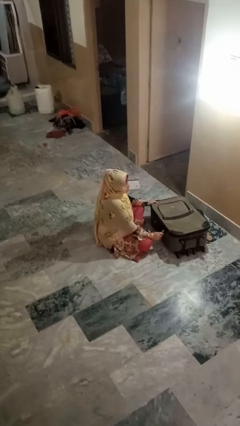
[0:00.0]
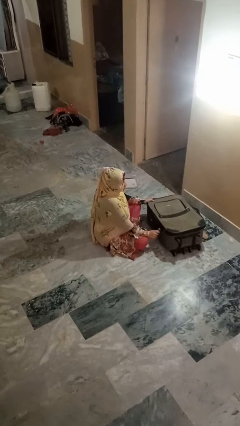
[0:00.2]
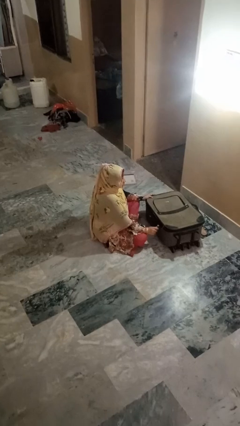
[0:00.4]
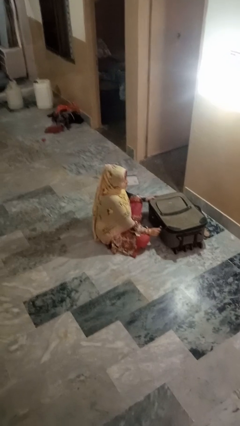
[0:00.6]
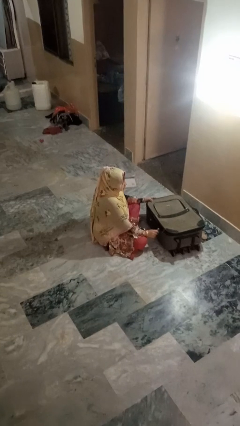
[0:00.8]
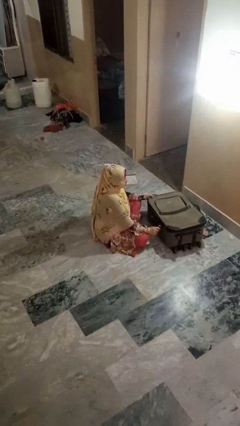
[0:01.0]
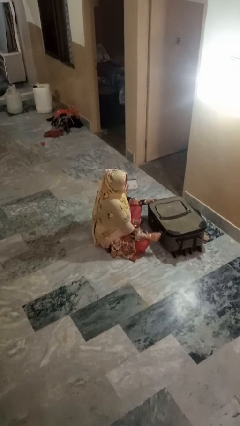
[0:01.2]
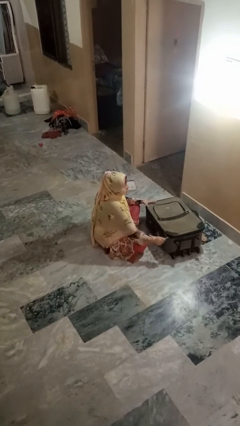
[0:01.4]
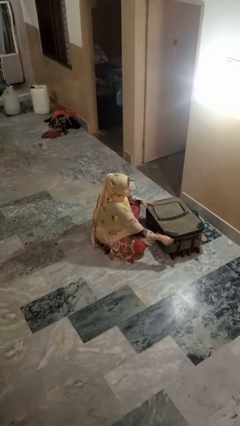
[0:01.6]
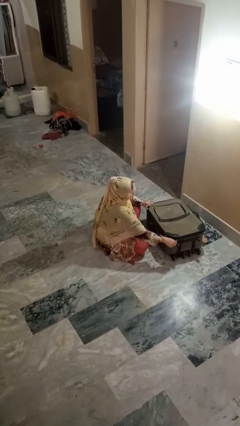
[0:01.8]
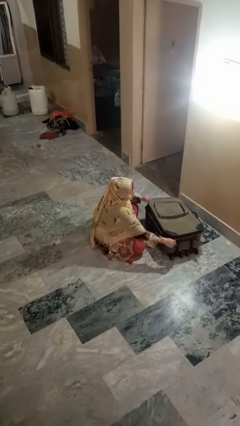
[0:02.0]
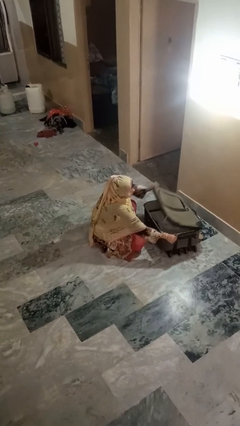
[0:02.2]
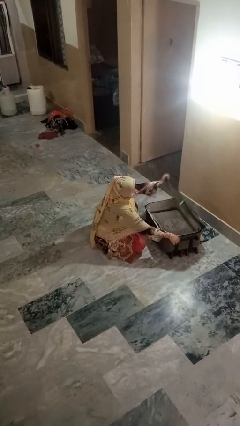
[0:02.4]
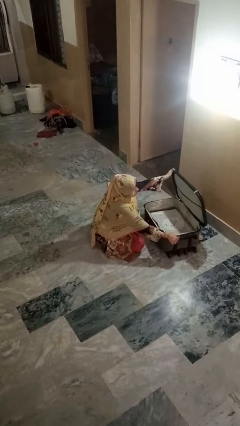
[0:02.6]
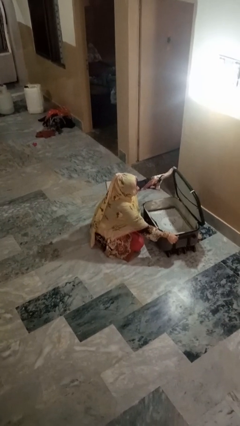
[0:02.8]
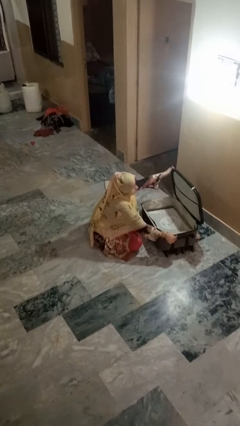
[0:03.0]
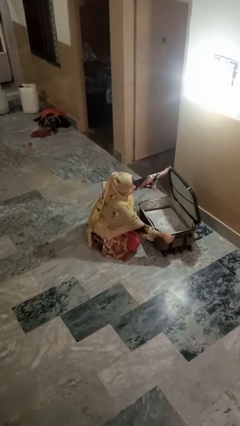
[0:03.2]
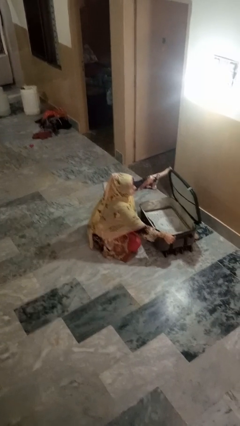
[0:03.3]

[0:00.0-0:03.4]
person opens suitcase

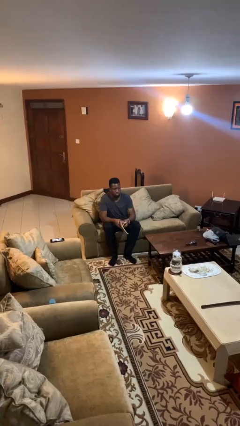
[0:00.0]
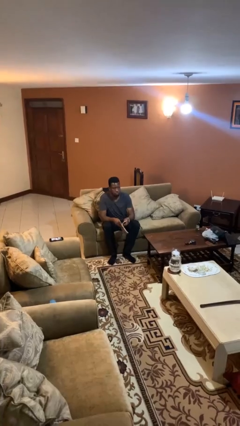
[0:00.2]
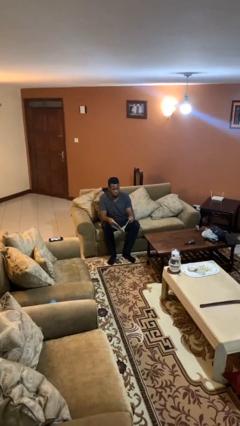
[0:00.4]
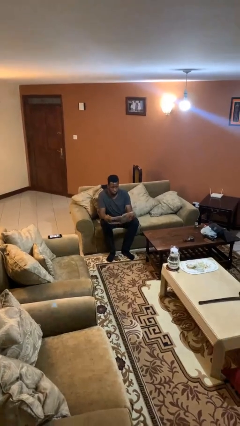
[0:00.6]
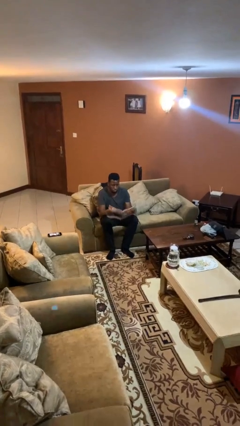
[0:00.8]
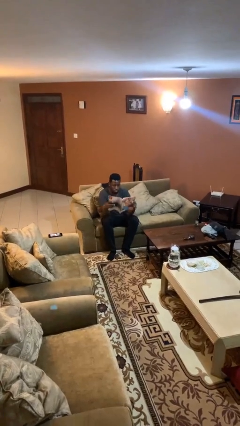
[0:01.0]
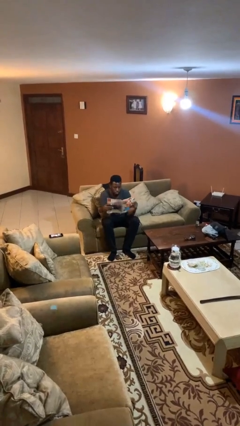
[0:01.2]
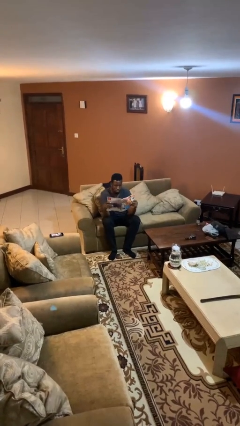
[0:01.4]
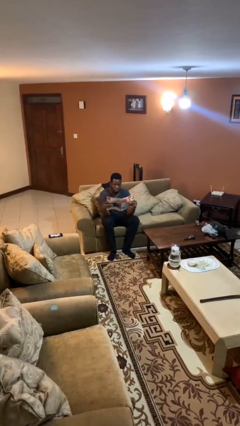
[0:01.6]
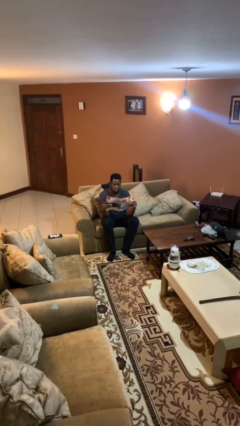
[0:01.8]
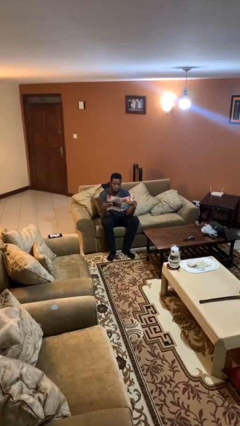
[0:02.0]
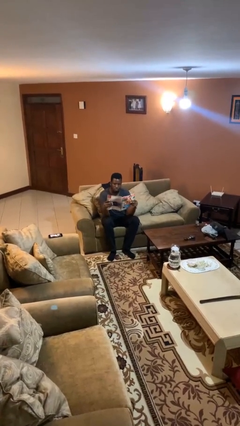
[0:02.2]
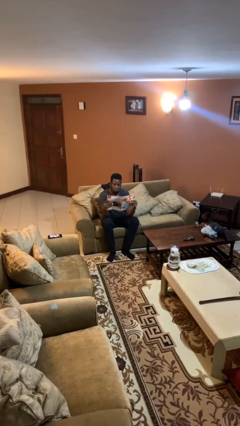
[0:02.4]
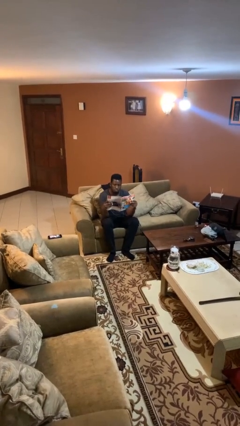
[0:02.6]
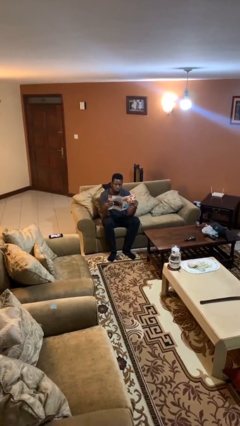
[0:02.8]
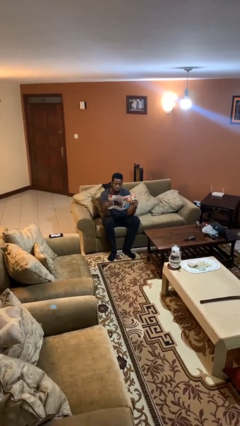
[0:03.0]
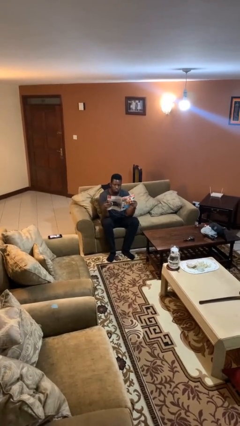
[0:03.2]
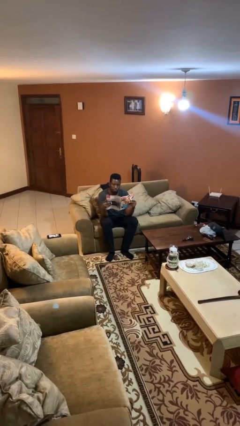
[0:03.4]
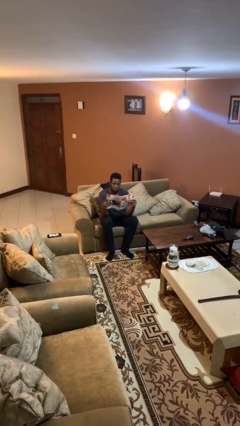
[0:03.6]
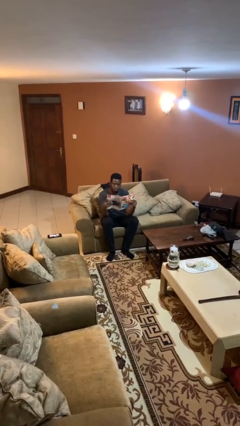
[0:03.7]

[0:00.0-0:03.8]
person reads document

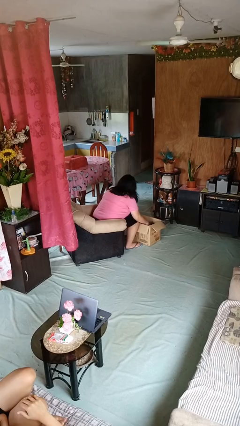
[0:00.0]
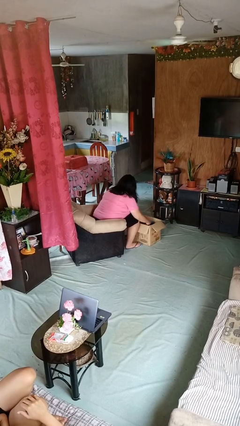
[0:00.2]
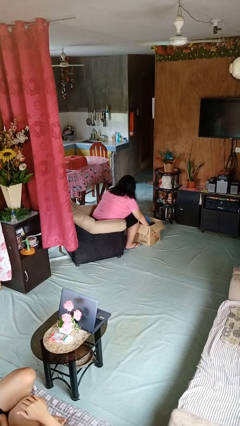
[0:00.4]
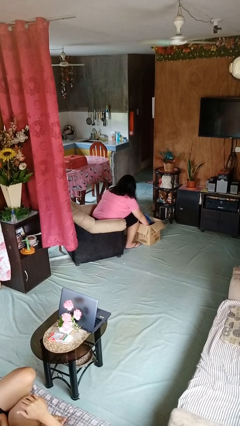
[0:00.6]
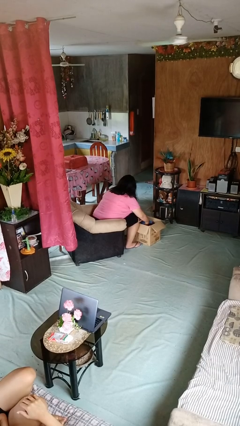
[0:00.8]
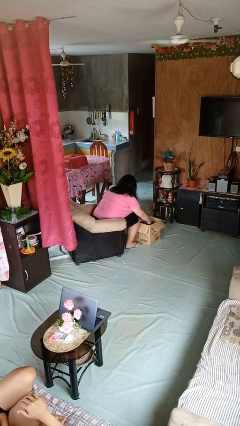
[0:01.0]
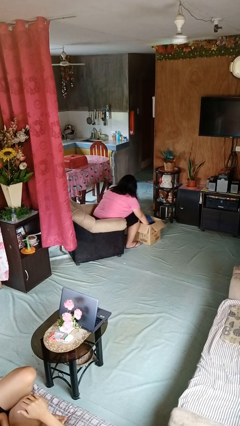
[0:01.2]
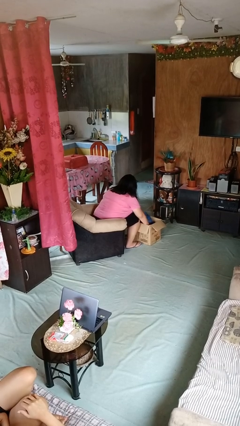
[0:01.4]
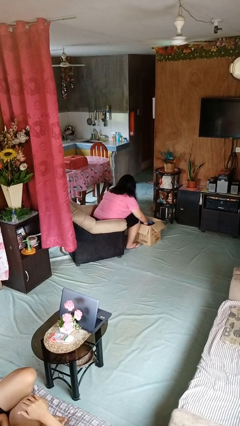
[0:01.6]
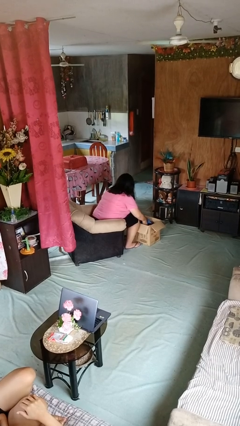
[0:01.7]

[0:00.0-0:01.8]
person searches in box

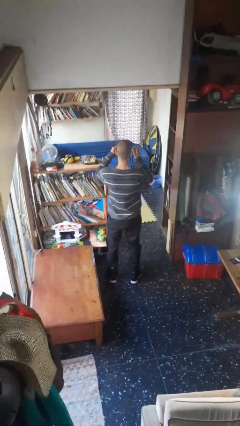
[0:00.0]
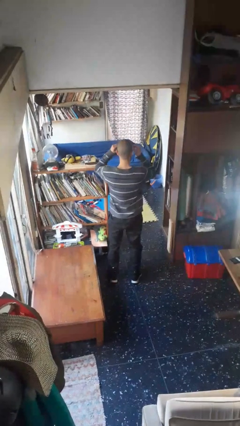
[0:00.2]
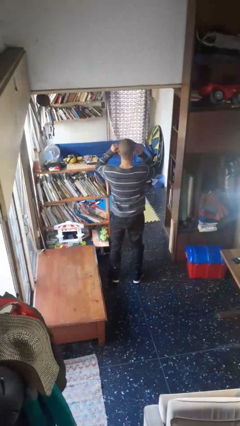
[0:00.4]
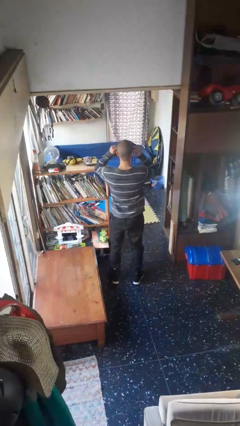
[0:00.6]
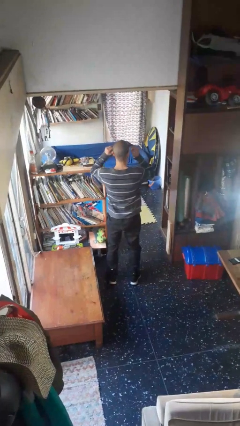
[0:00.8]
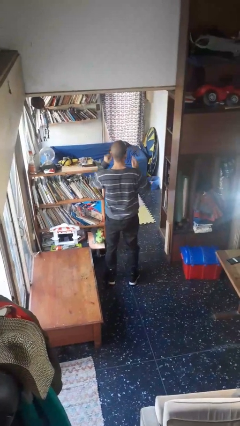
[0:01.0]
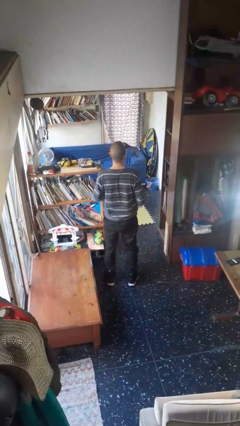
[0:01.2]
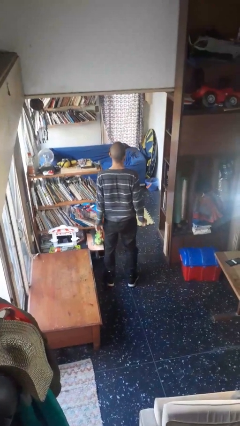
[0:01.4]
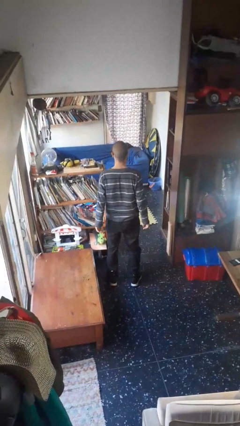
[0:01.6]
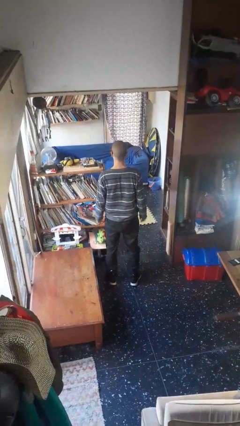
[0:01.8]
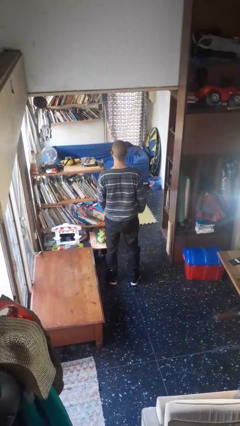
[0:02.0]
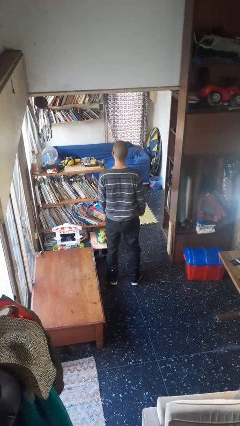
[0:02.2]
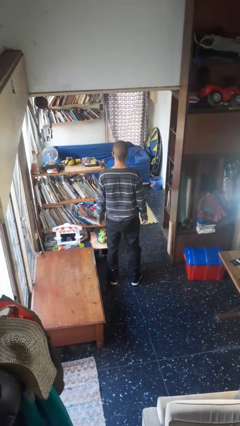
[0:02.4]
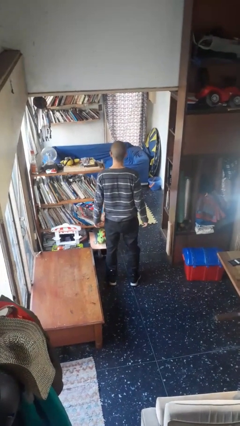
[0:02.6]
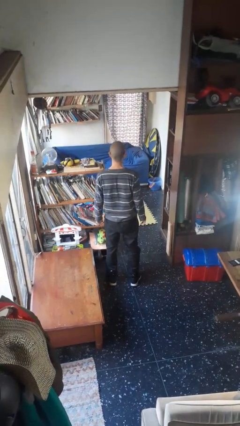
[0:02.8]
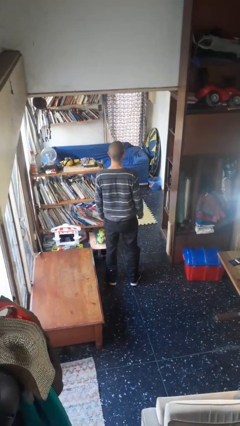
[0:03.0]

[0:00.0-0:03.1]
person puts on glasses

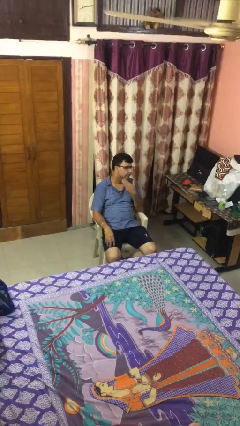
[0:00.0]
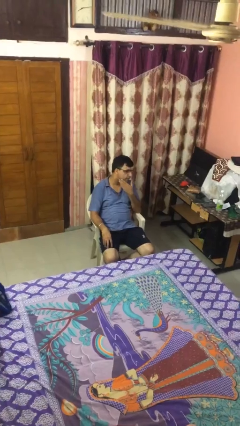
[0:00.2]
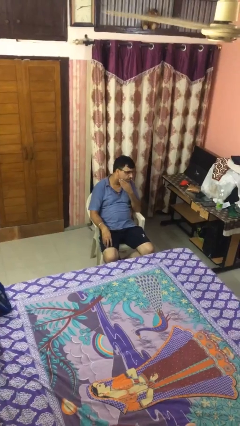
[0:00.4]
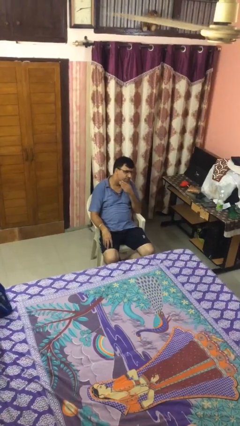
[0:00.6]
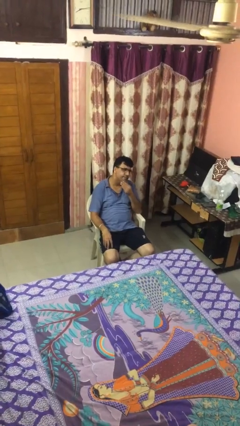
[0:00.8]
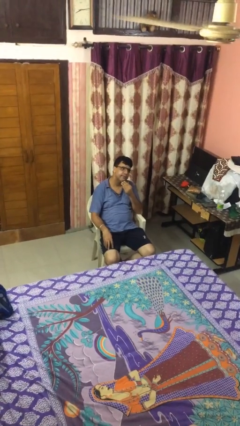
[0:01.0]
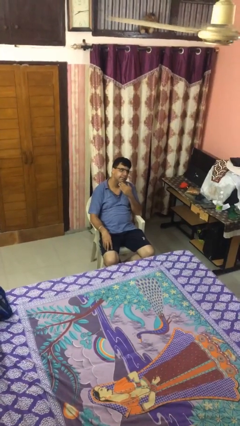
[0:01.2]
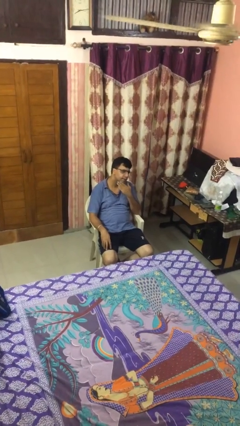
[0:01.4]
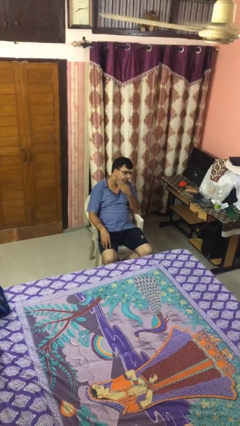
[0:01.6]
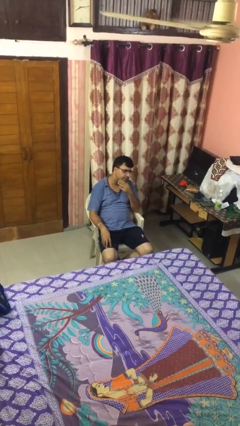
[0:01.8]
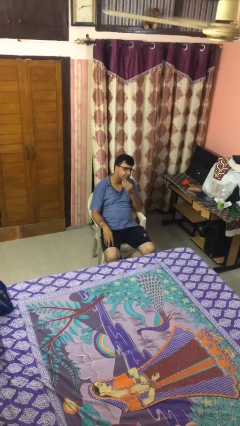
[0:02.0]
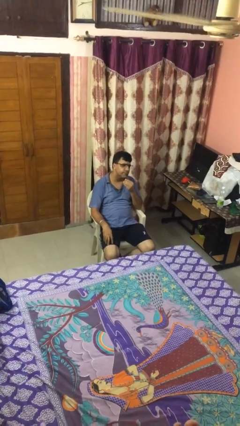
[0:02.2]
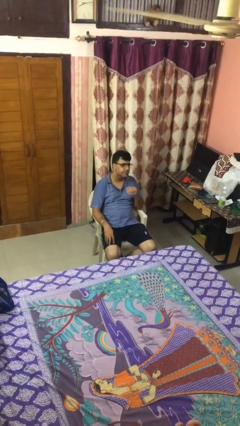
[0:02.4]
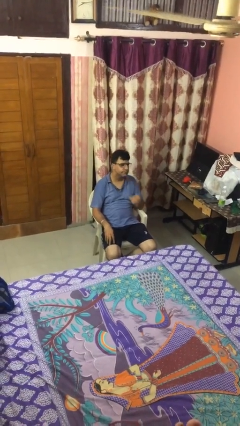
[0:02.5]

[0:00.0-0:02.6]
person strokes chin

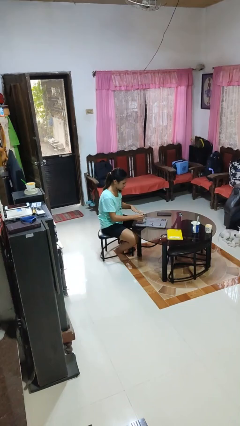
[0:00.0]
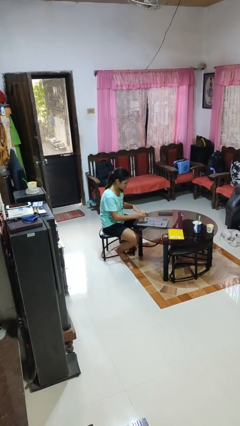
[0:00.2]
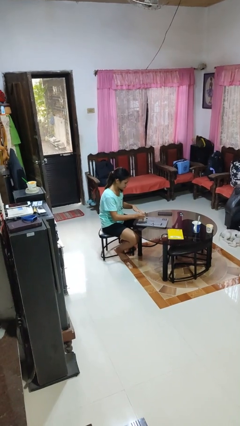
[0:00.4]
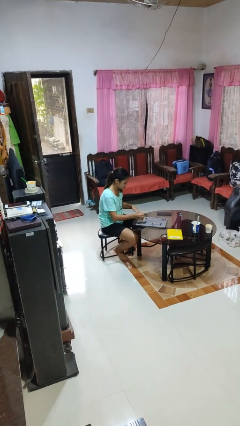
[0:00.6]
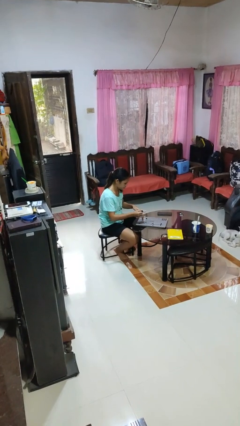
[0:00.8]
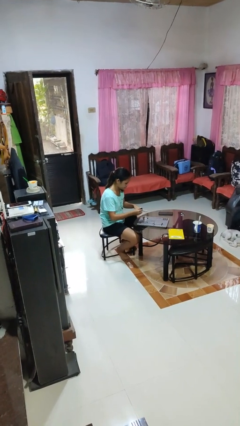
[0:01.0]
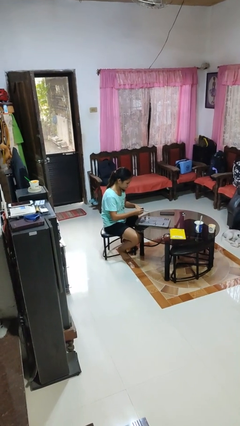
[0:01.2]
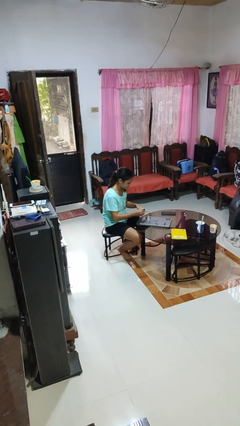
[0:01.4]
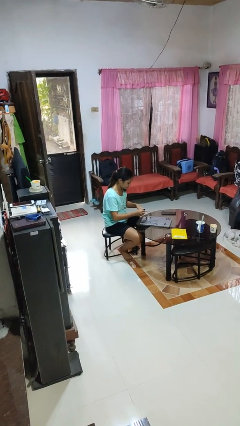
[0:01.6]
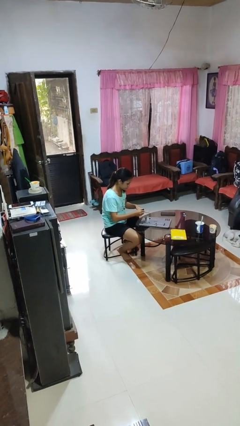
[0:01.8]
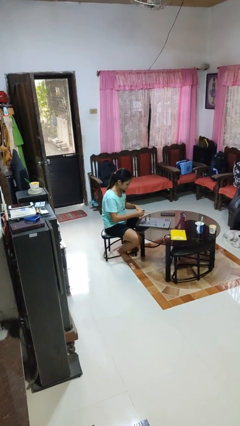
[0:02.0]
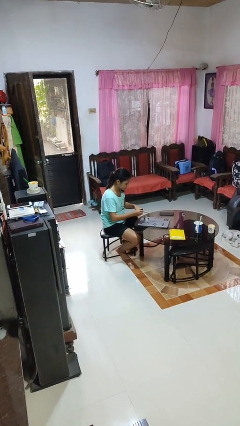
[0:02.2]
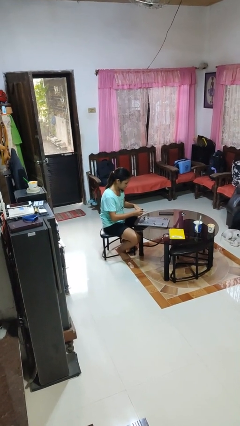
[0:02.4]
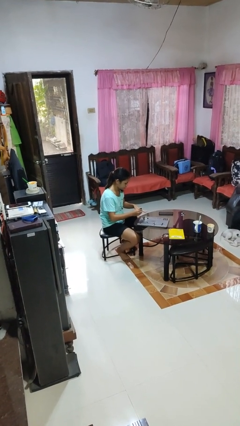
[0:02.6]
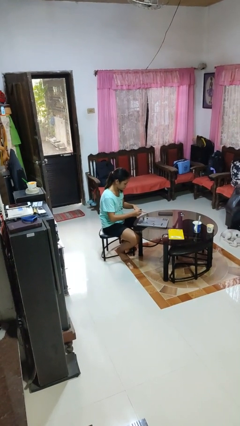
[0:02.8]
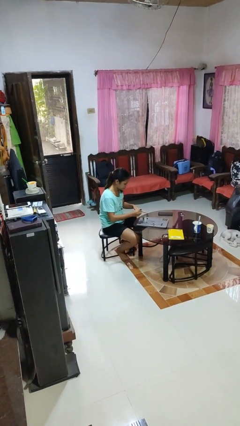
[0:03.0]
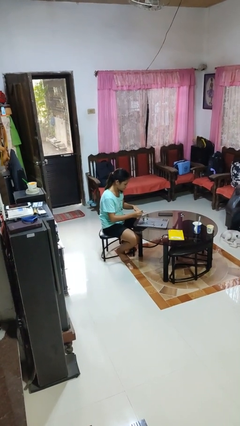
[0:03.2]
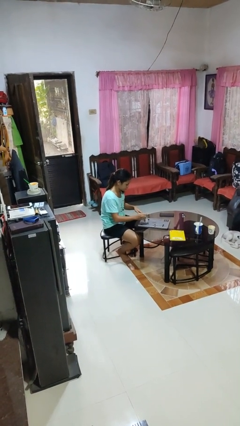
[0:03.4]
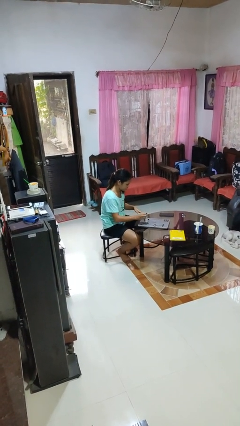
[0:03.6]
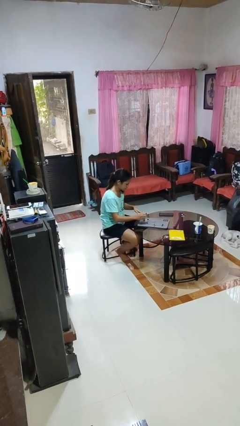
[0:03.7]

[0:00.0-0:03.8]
person paints fingernails
